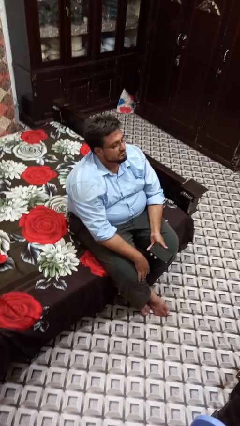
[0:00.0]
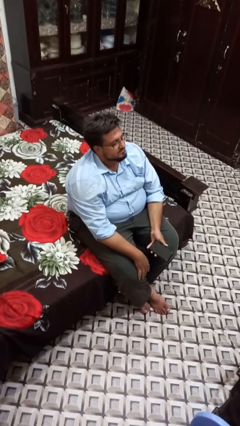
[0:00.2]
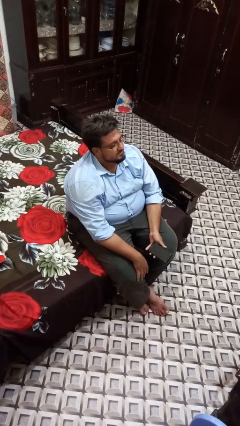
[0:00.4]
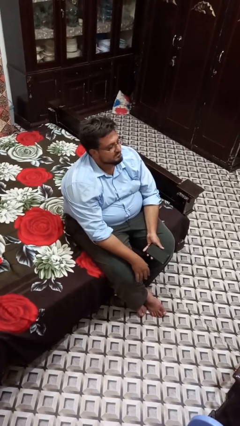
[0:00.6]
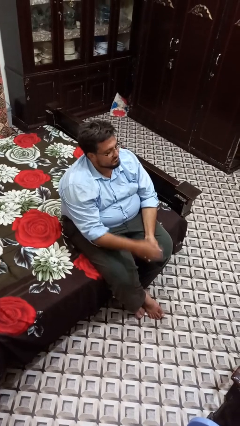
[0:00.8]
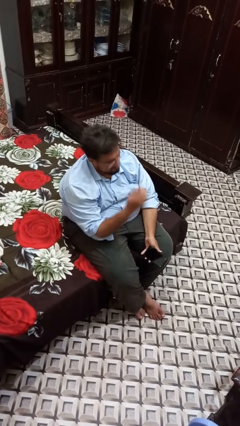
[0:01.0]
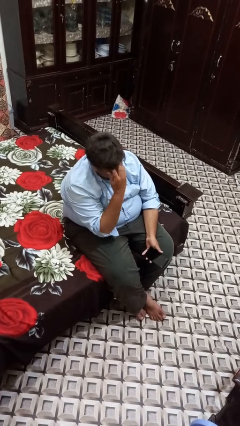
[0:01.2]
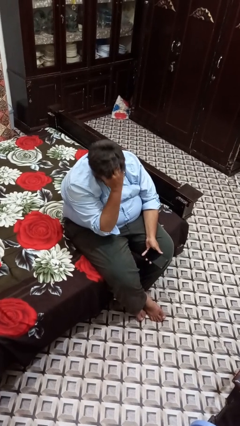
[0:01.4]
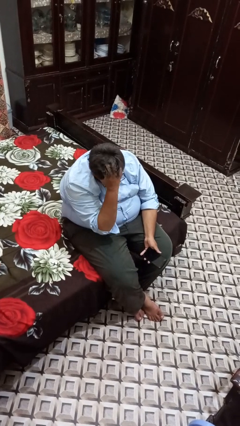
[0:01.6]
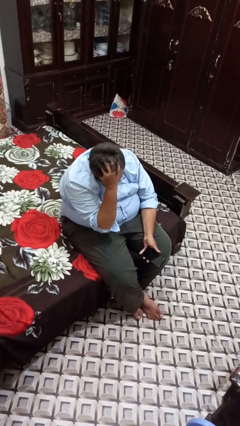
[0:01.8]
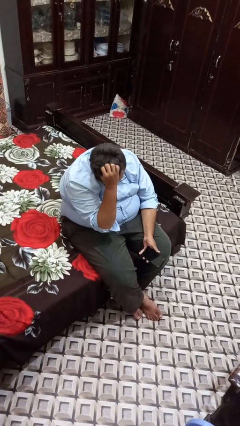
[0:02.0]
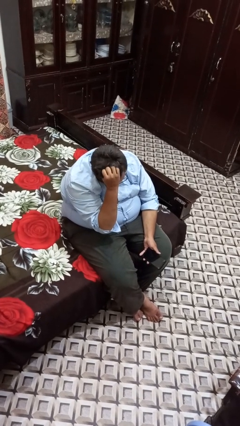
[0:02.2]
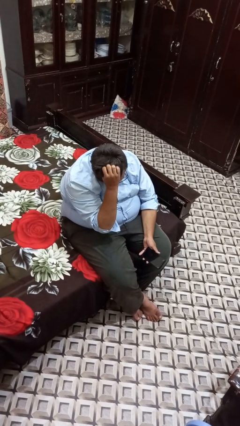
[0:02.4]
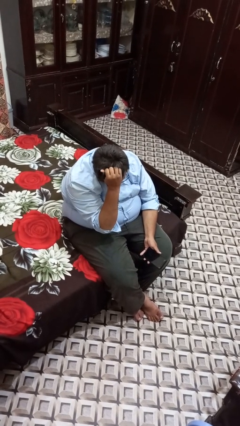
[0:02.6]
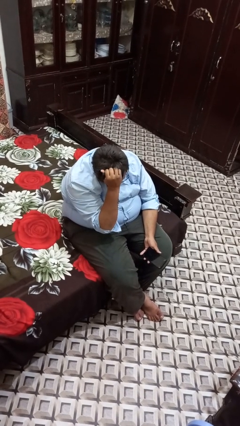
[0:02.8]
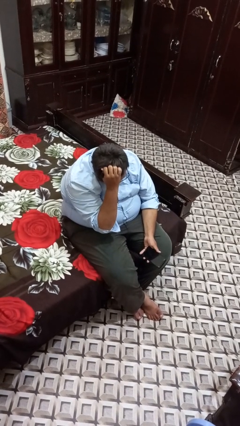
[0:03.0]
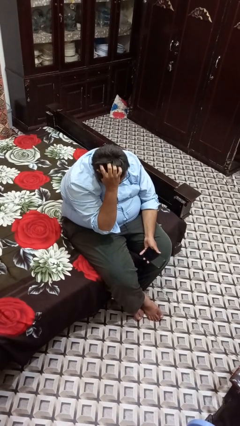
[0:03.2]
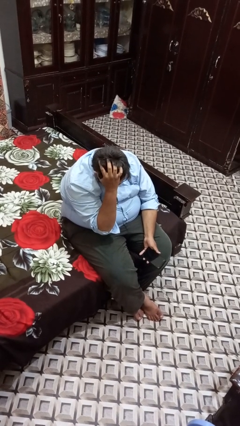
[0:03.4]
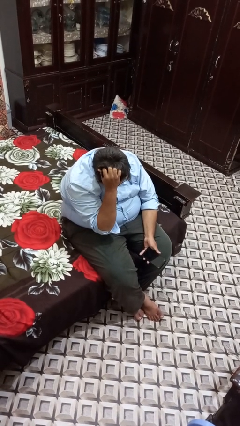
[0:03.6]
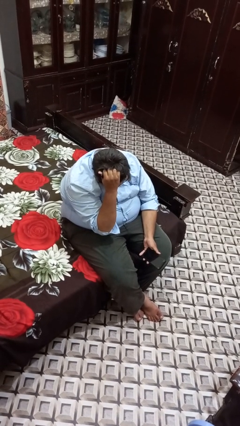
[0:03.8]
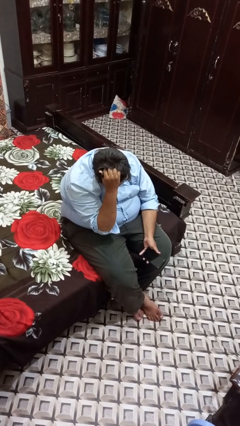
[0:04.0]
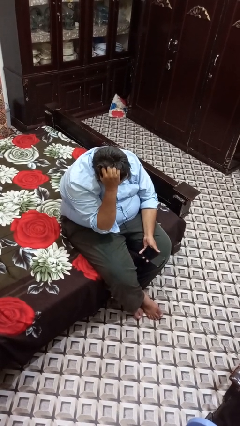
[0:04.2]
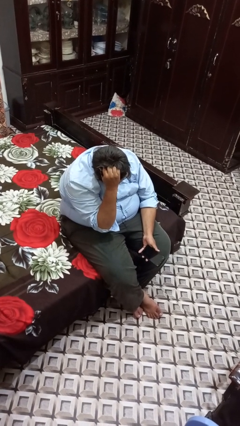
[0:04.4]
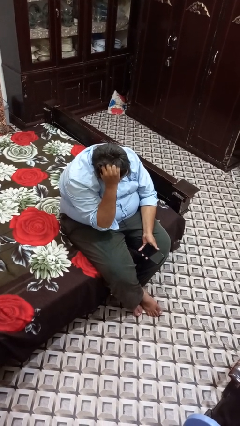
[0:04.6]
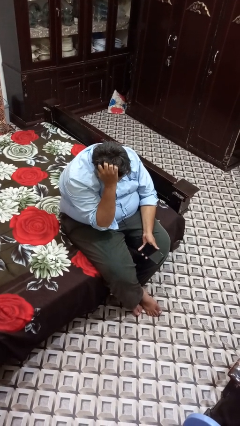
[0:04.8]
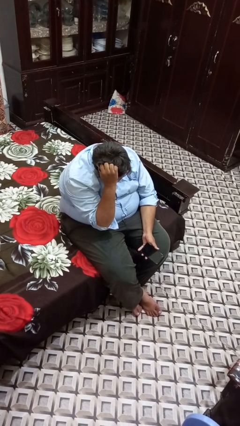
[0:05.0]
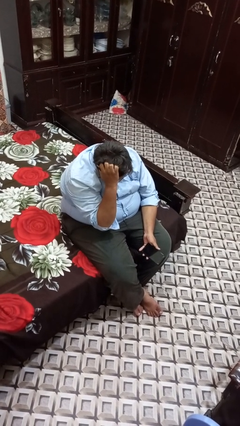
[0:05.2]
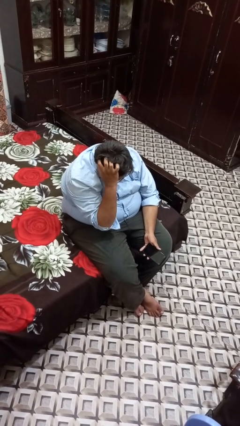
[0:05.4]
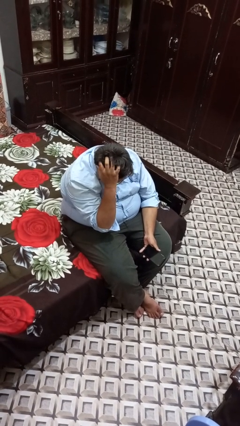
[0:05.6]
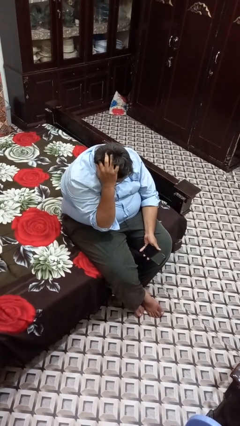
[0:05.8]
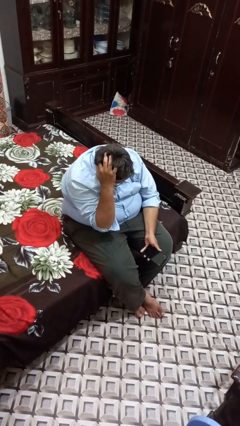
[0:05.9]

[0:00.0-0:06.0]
person strokes hair

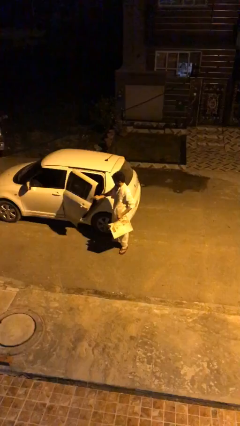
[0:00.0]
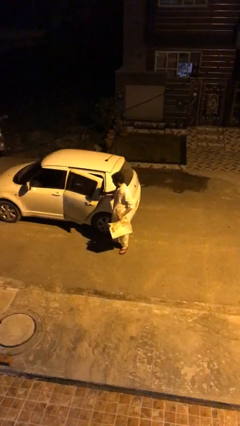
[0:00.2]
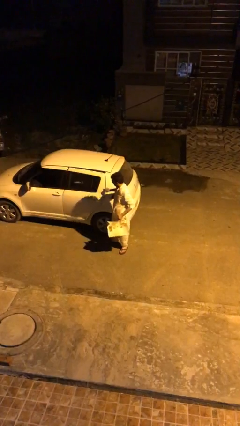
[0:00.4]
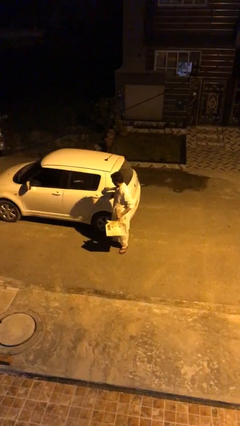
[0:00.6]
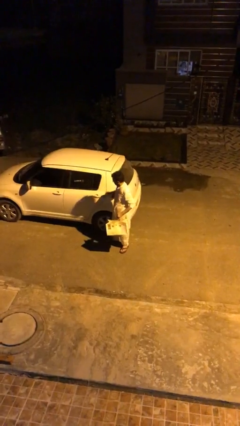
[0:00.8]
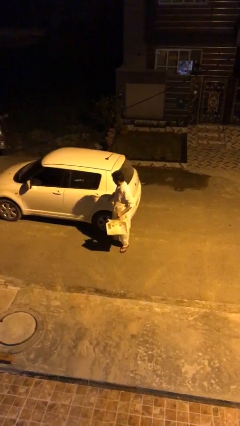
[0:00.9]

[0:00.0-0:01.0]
person closes car door

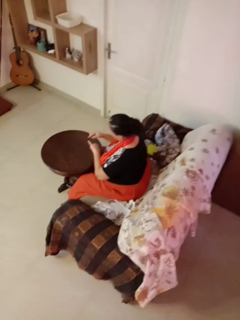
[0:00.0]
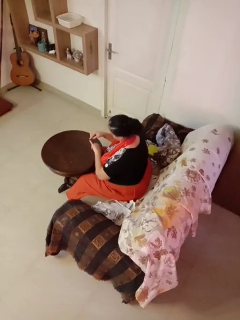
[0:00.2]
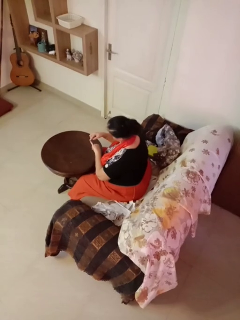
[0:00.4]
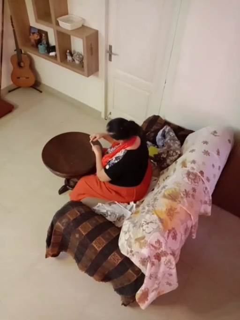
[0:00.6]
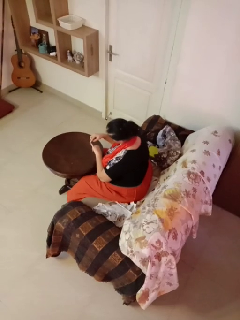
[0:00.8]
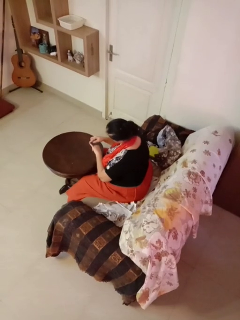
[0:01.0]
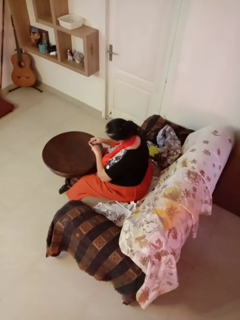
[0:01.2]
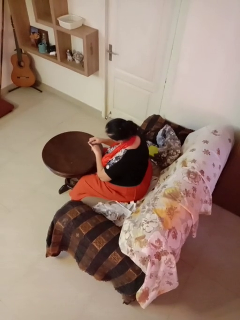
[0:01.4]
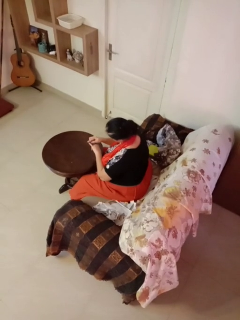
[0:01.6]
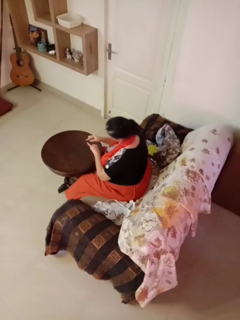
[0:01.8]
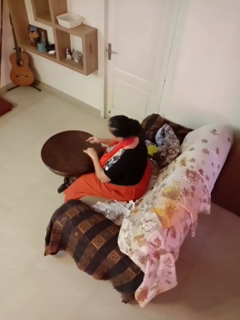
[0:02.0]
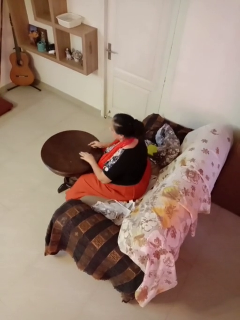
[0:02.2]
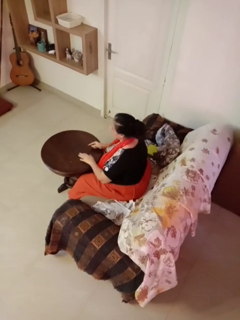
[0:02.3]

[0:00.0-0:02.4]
person files fingernails

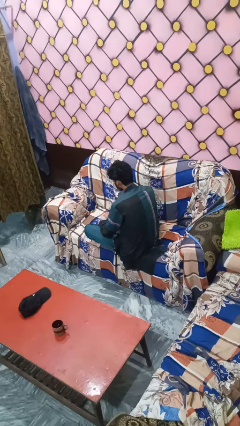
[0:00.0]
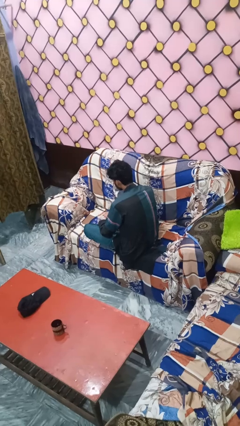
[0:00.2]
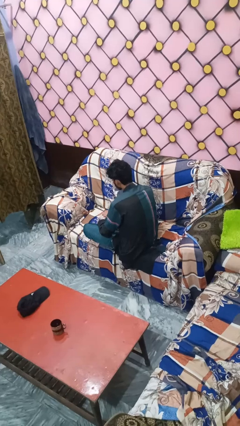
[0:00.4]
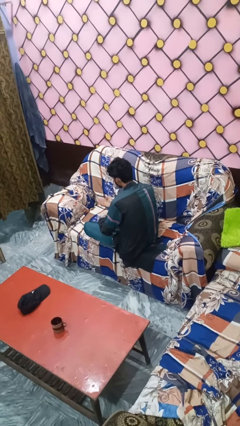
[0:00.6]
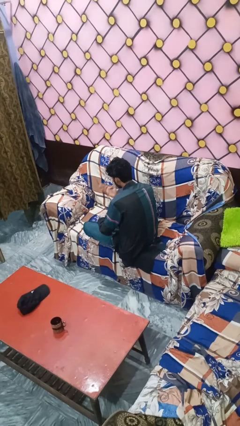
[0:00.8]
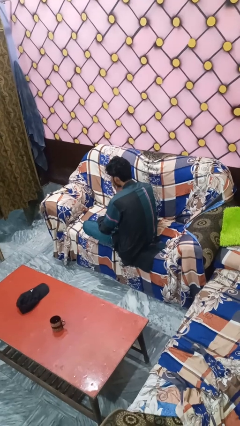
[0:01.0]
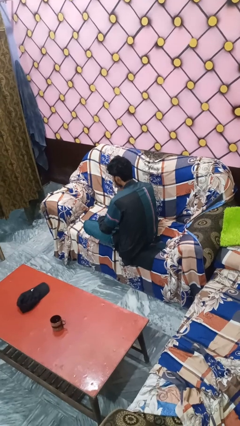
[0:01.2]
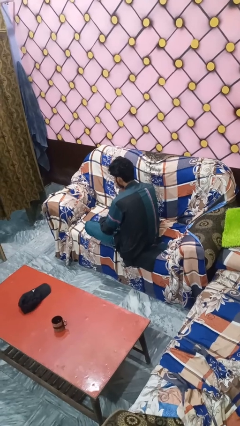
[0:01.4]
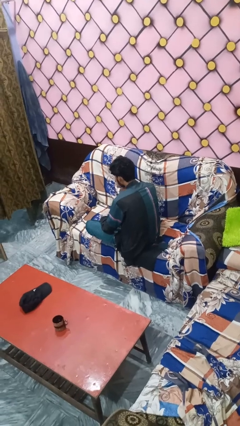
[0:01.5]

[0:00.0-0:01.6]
person gestures blow kiss

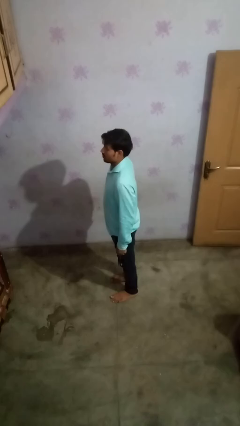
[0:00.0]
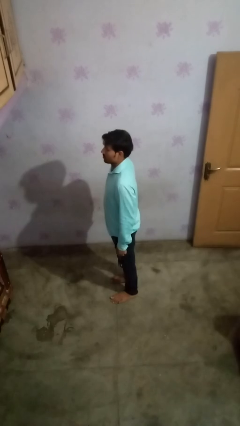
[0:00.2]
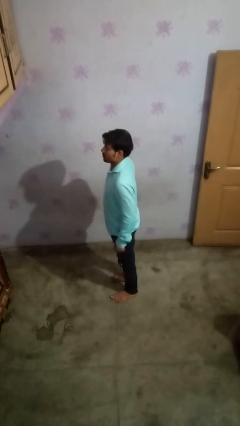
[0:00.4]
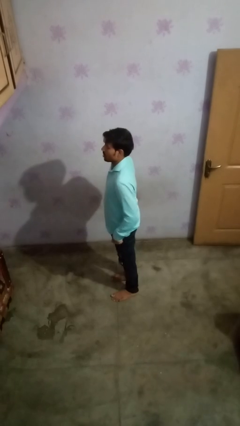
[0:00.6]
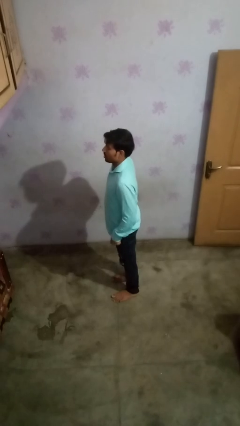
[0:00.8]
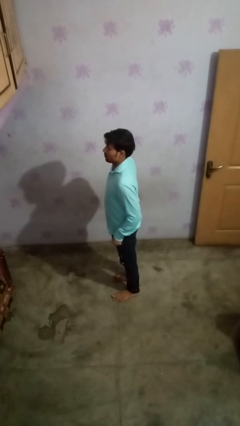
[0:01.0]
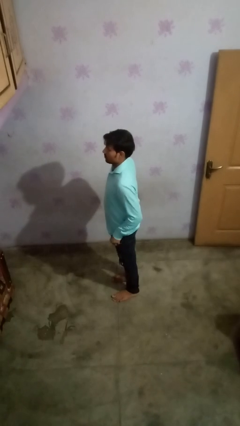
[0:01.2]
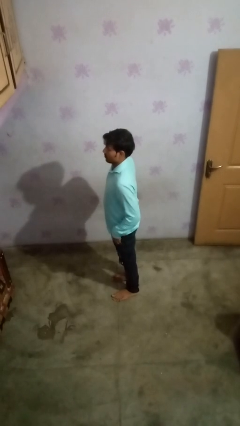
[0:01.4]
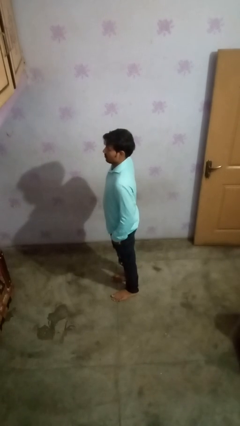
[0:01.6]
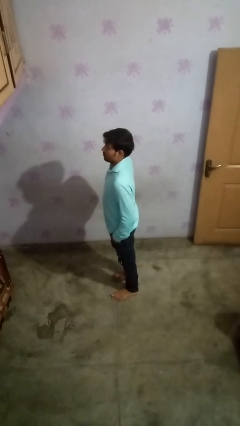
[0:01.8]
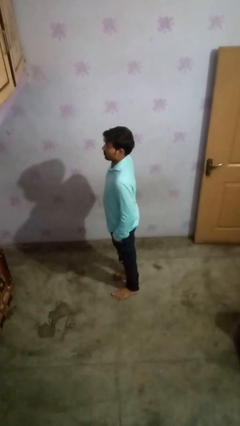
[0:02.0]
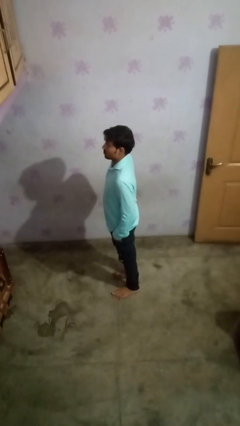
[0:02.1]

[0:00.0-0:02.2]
person puts hands in back pockets

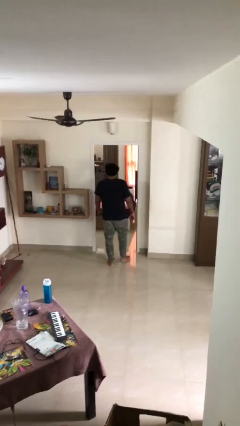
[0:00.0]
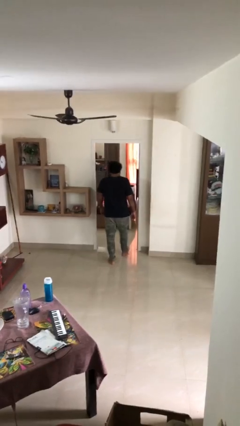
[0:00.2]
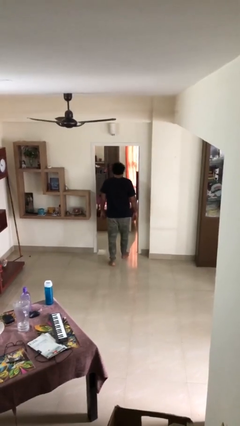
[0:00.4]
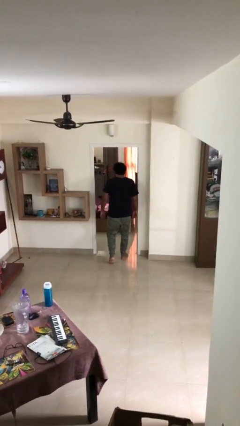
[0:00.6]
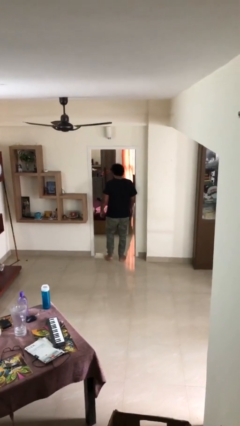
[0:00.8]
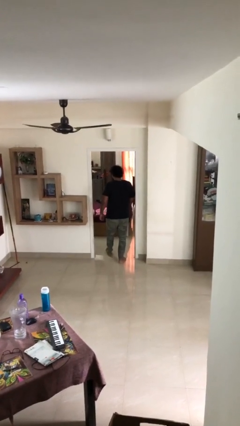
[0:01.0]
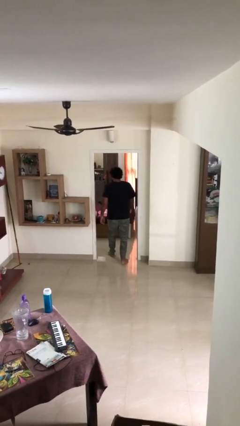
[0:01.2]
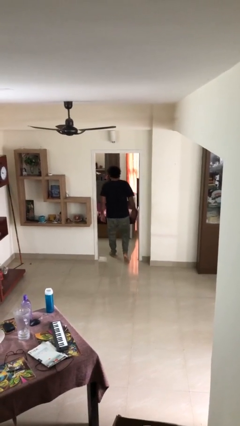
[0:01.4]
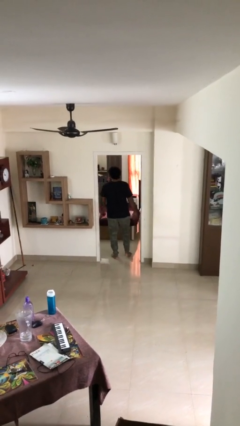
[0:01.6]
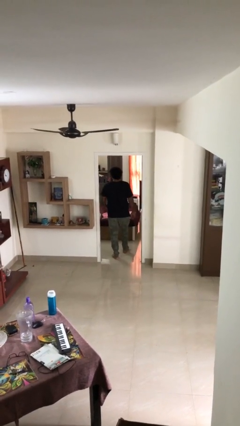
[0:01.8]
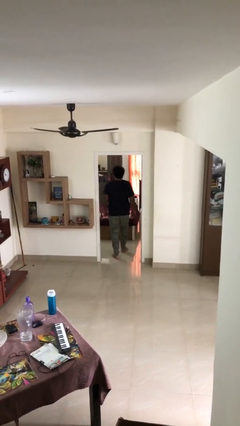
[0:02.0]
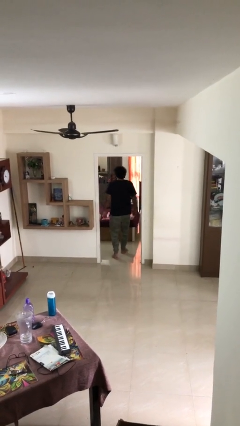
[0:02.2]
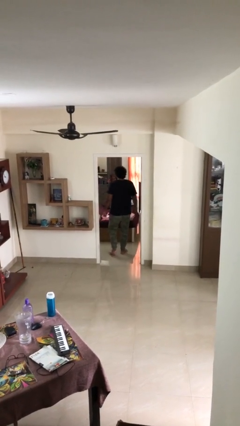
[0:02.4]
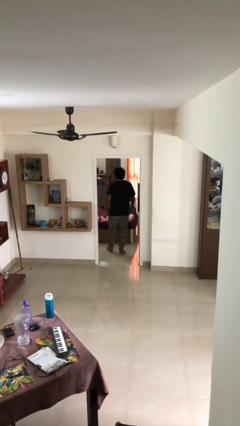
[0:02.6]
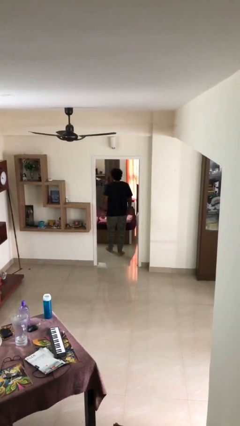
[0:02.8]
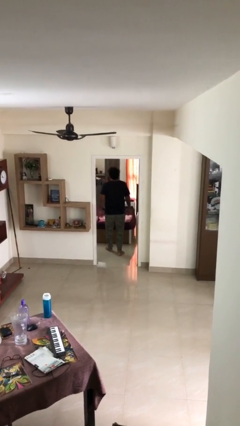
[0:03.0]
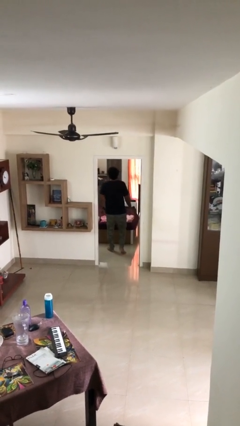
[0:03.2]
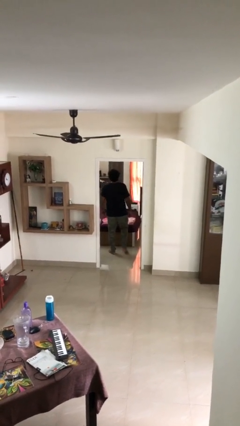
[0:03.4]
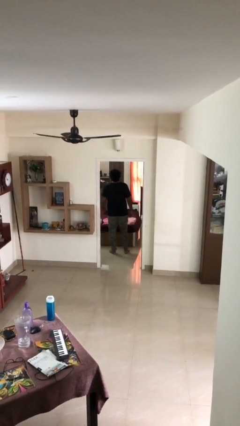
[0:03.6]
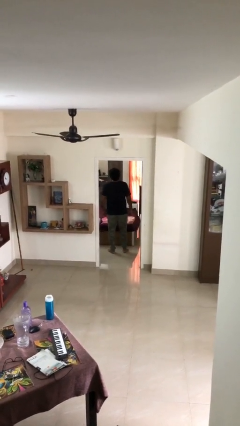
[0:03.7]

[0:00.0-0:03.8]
person exits scene through structure

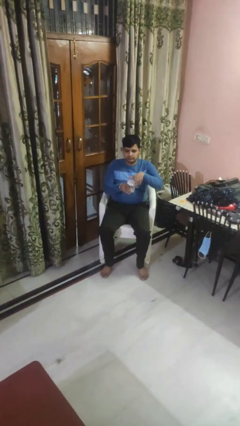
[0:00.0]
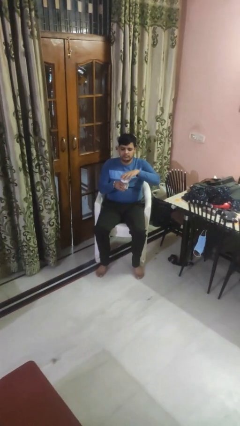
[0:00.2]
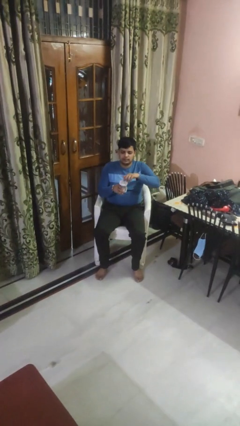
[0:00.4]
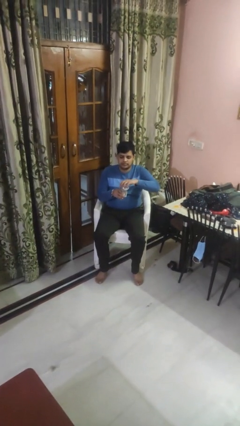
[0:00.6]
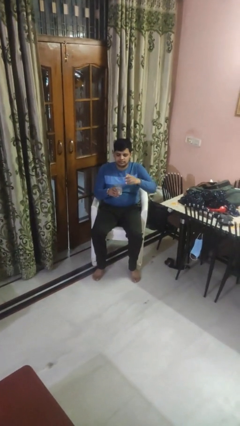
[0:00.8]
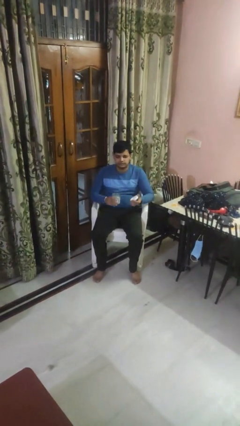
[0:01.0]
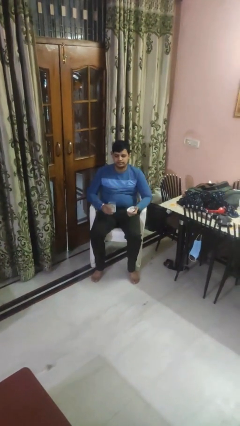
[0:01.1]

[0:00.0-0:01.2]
person opens jar
